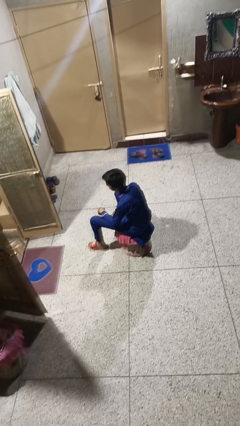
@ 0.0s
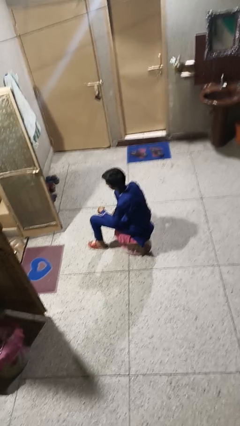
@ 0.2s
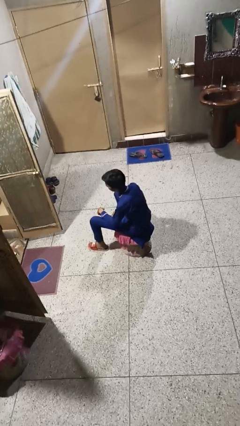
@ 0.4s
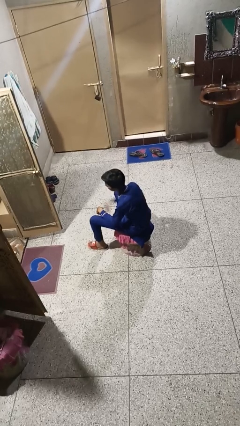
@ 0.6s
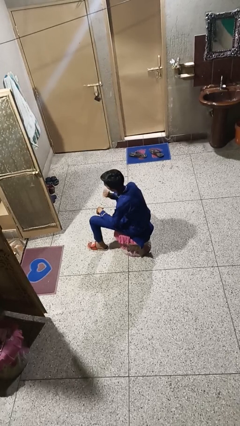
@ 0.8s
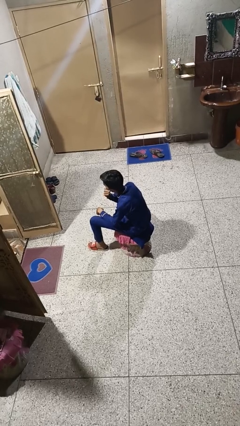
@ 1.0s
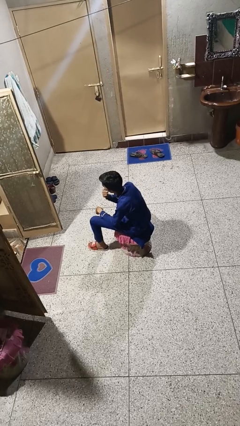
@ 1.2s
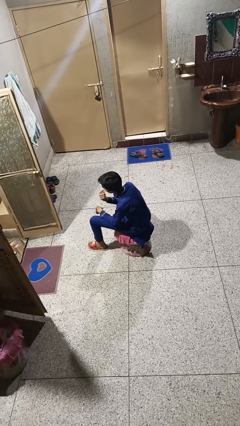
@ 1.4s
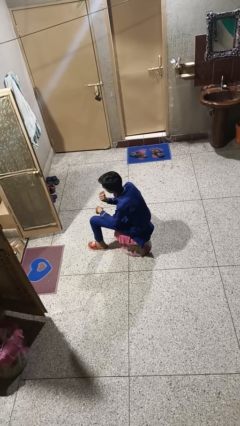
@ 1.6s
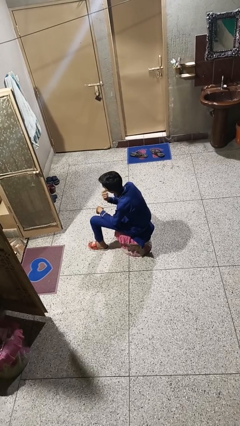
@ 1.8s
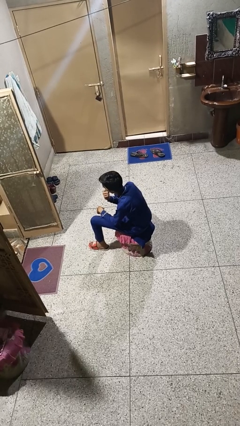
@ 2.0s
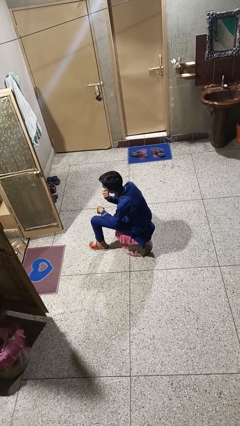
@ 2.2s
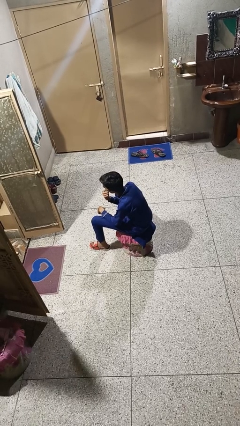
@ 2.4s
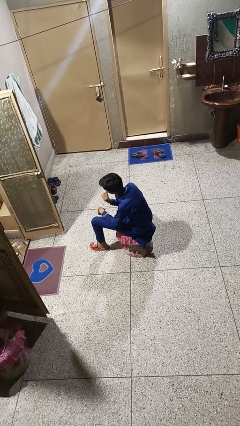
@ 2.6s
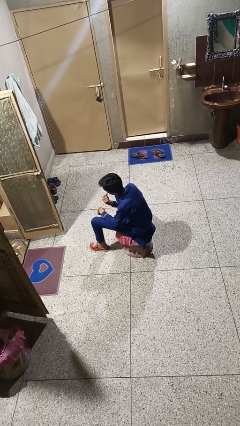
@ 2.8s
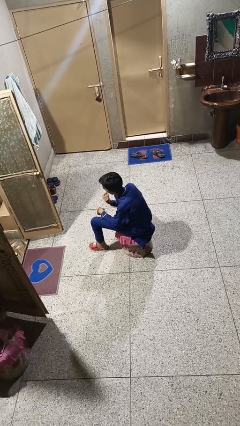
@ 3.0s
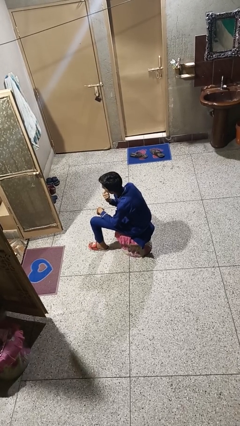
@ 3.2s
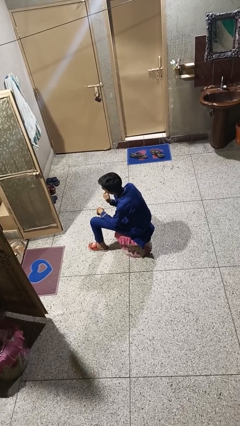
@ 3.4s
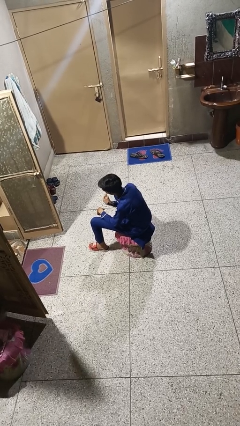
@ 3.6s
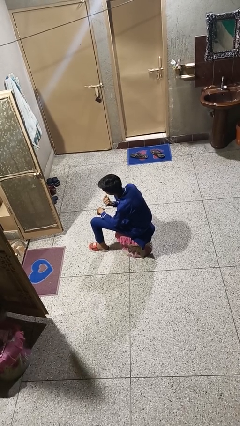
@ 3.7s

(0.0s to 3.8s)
person licks fingers

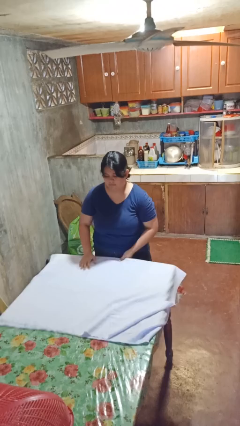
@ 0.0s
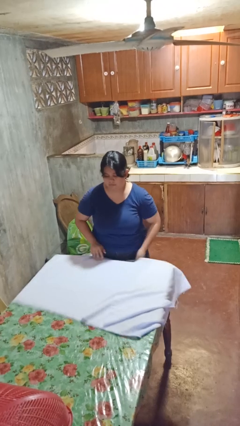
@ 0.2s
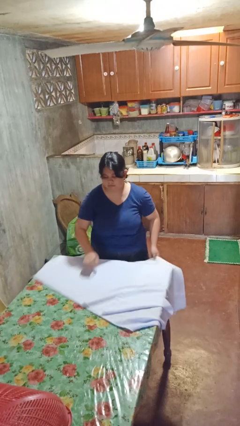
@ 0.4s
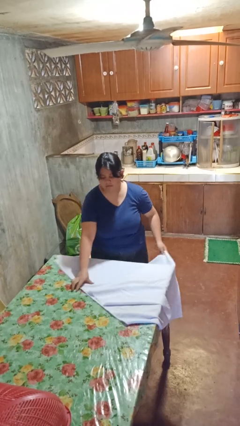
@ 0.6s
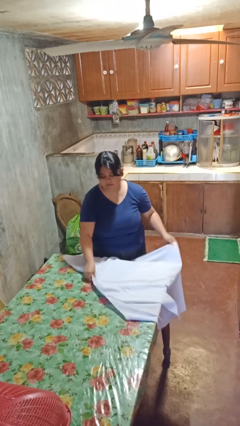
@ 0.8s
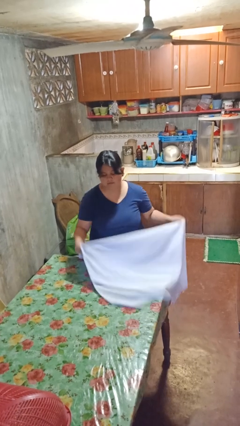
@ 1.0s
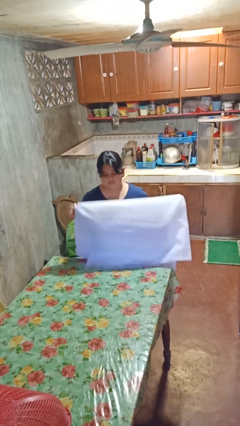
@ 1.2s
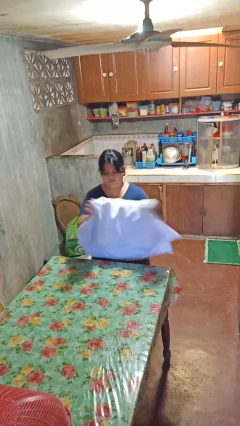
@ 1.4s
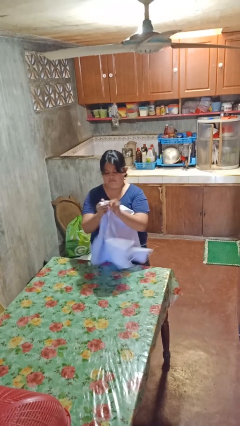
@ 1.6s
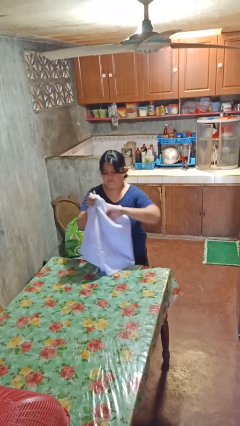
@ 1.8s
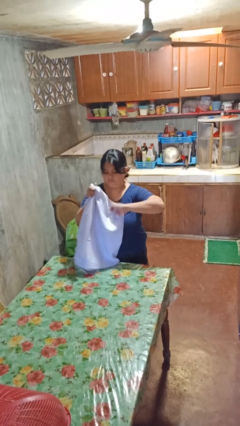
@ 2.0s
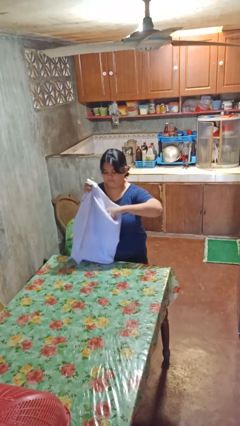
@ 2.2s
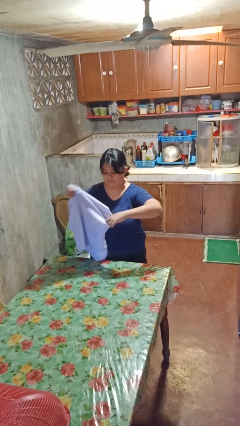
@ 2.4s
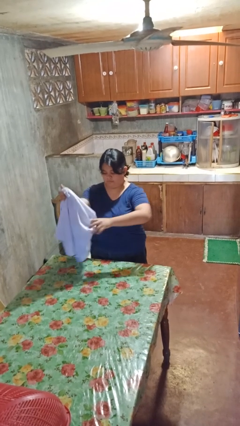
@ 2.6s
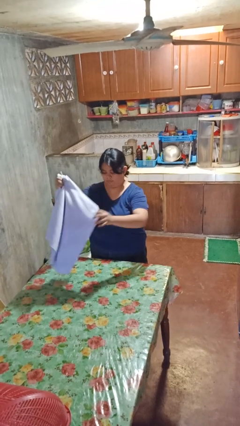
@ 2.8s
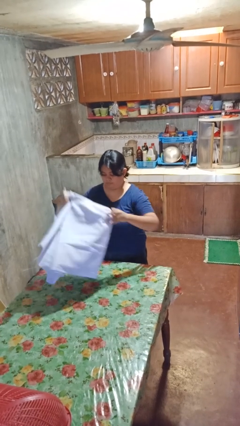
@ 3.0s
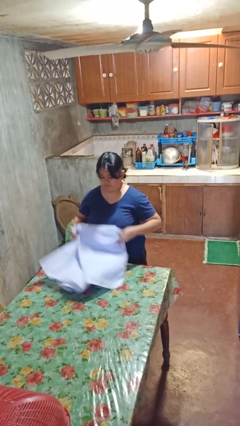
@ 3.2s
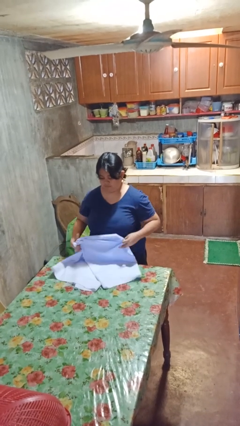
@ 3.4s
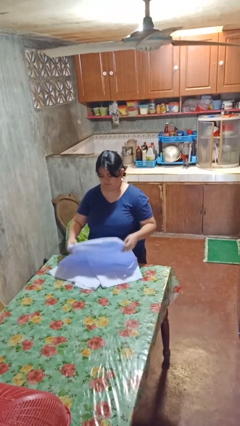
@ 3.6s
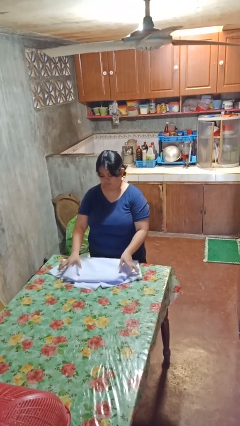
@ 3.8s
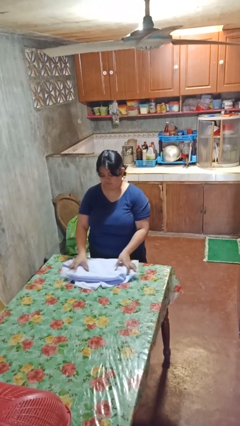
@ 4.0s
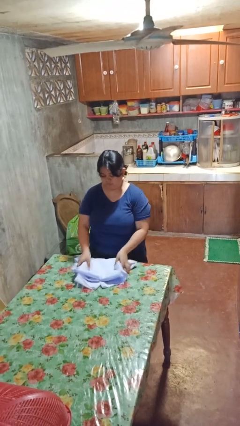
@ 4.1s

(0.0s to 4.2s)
person folds tablecloth

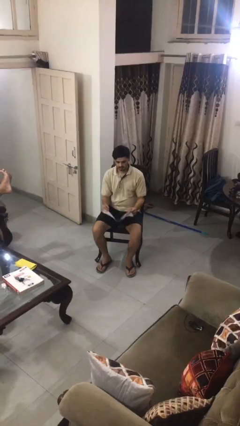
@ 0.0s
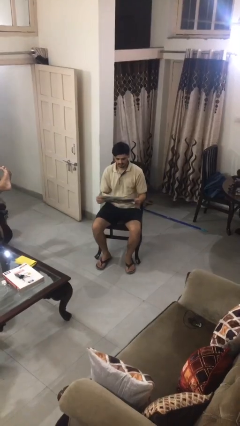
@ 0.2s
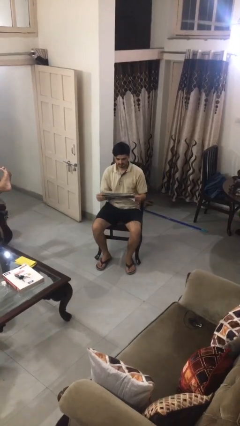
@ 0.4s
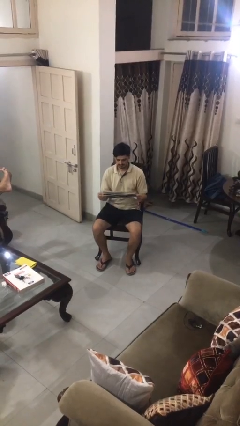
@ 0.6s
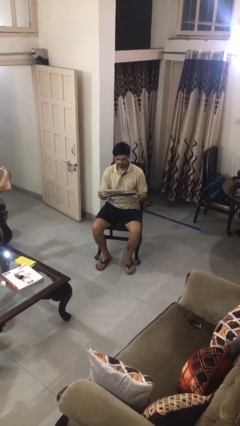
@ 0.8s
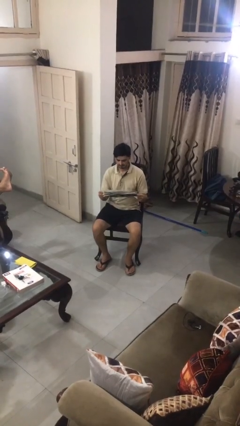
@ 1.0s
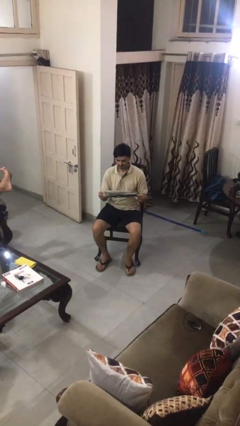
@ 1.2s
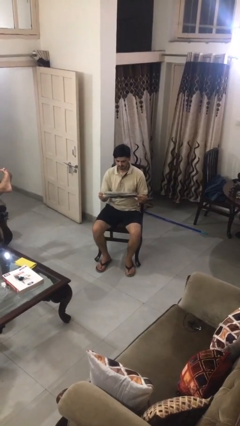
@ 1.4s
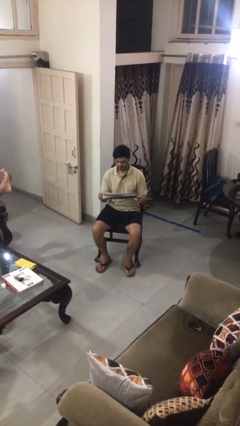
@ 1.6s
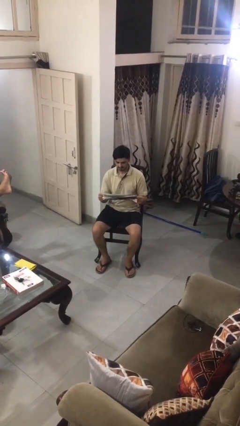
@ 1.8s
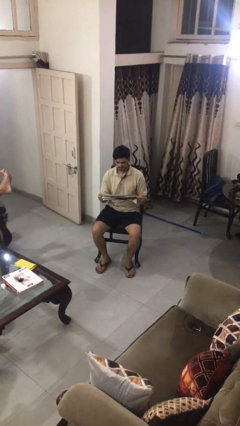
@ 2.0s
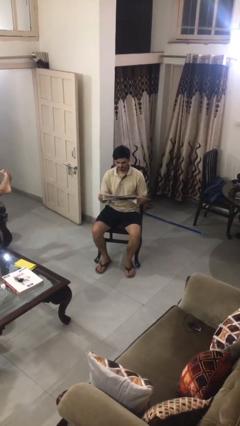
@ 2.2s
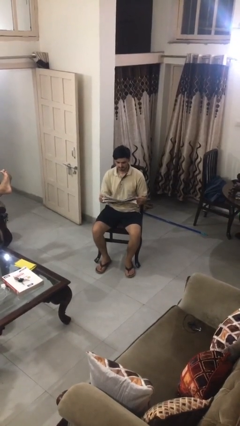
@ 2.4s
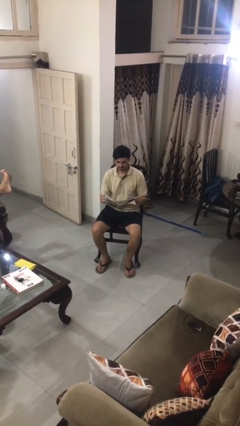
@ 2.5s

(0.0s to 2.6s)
person reads newspaper

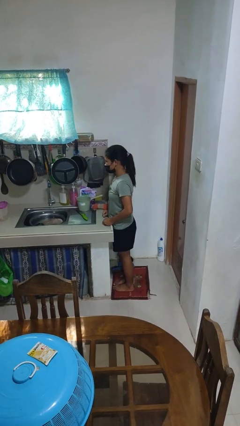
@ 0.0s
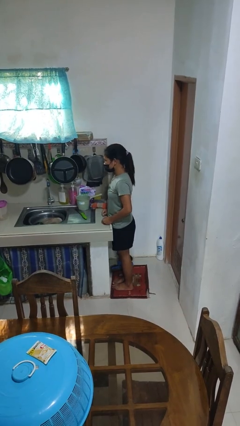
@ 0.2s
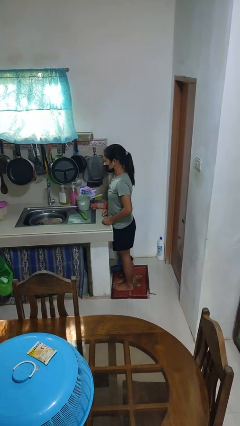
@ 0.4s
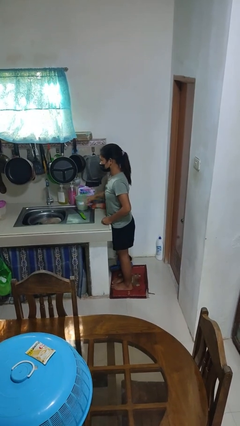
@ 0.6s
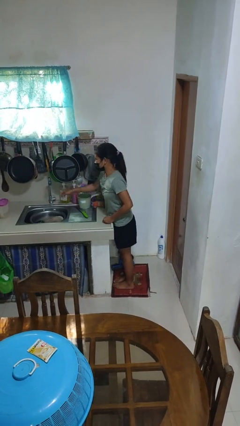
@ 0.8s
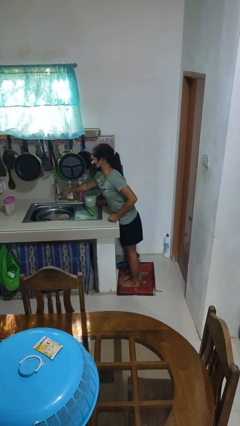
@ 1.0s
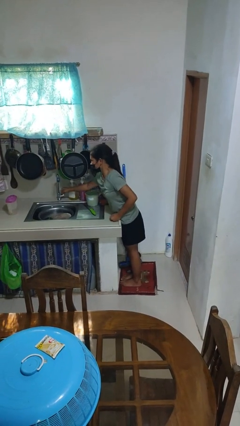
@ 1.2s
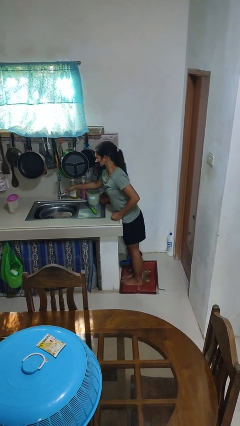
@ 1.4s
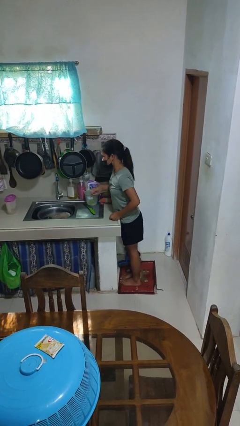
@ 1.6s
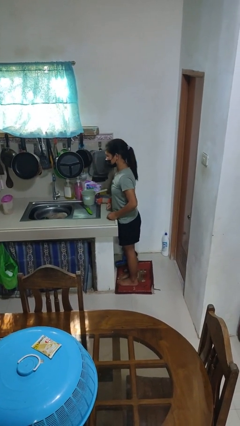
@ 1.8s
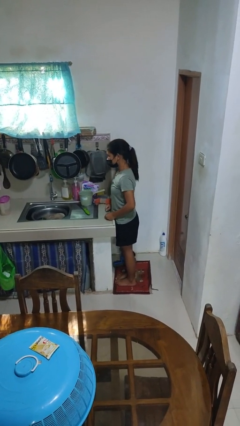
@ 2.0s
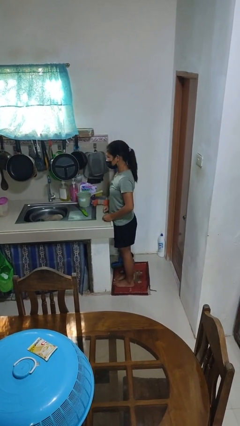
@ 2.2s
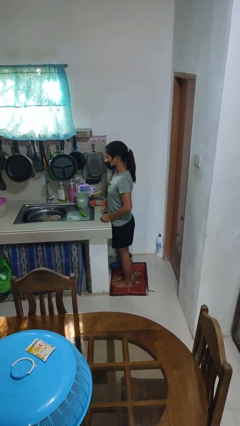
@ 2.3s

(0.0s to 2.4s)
person turns off faucet

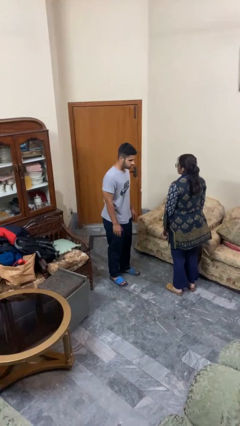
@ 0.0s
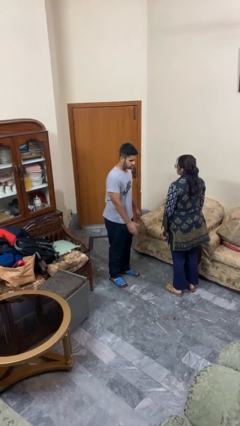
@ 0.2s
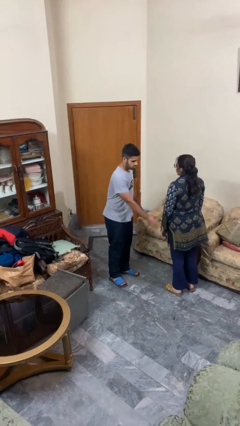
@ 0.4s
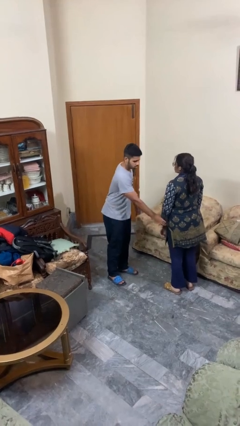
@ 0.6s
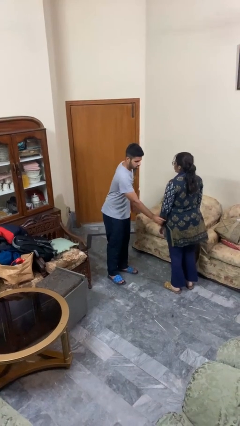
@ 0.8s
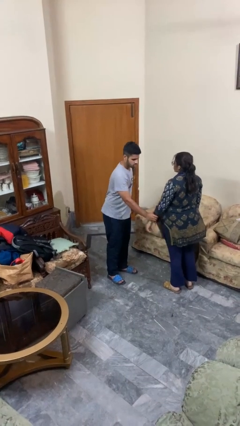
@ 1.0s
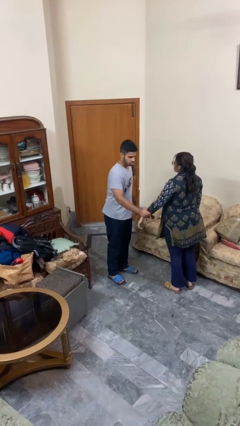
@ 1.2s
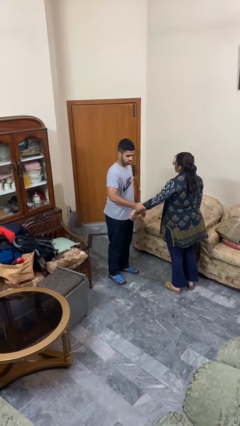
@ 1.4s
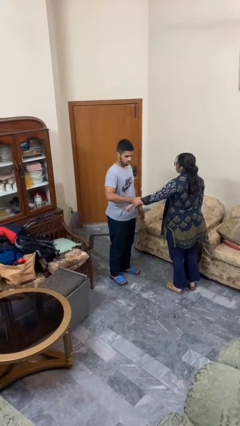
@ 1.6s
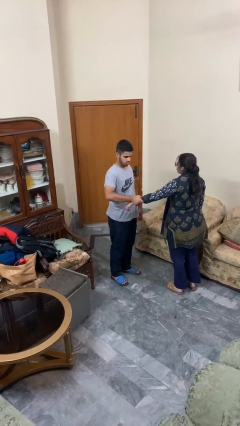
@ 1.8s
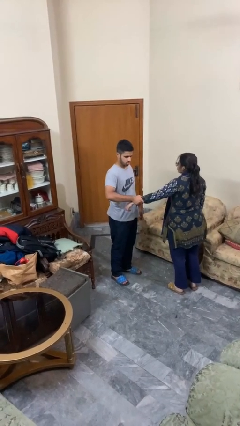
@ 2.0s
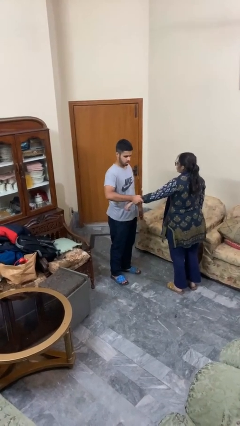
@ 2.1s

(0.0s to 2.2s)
person grabs person by forearm

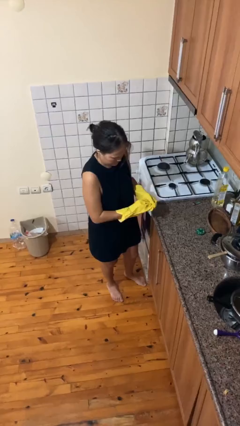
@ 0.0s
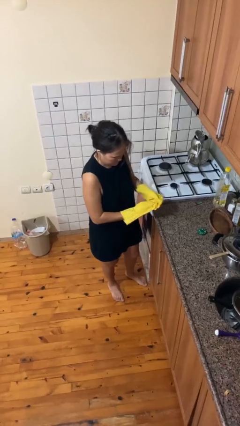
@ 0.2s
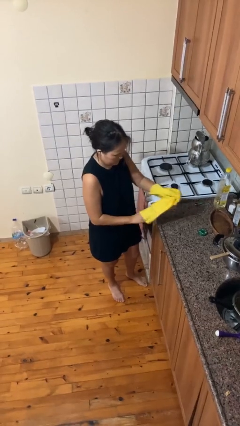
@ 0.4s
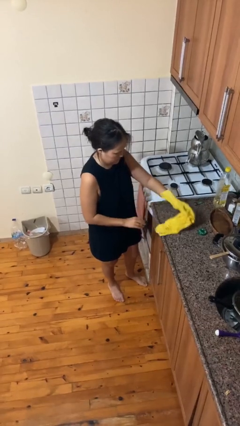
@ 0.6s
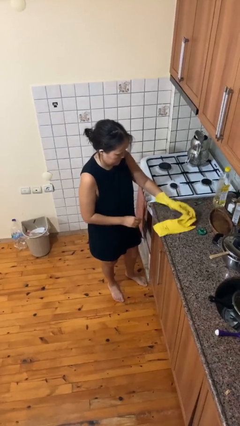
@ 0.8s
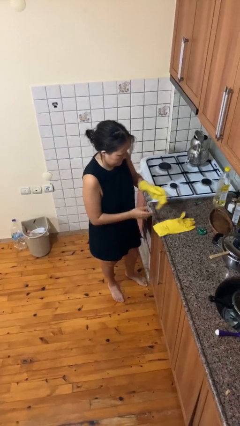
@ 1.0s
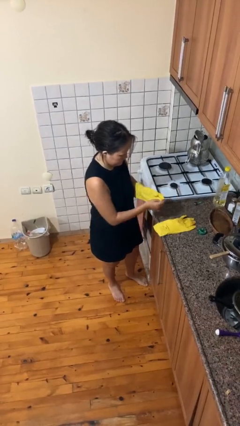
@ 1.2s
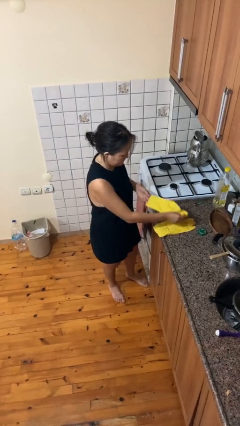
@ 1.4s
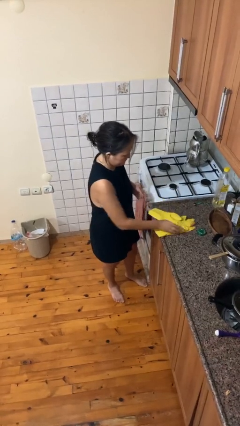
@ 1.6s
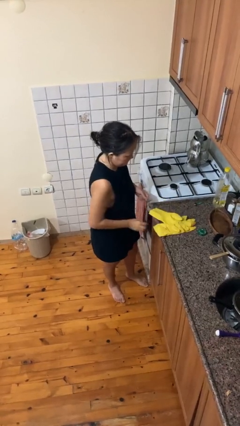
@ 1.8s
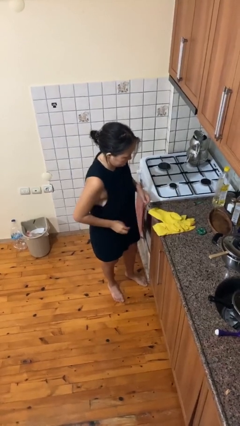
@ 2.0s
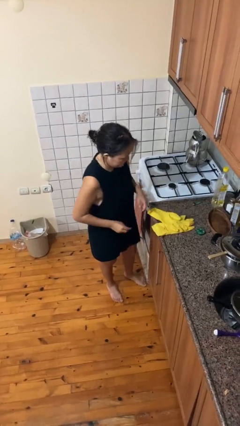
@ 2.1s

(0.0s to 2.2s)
person takes off gloves

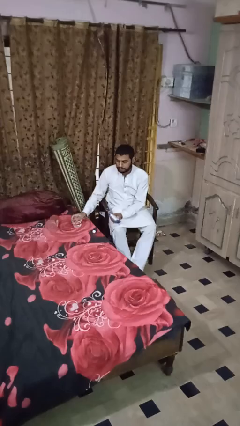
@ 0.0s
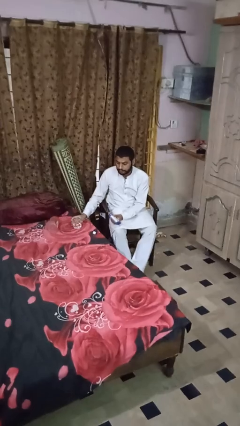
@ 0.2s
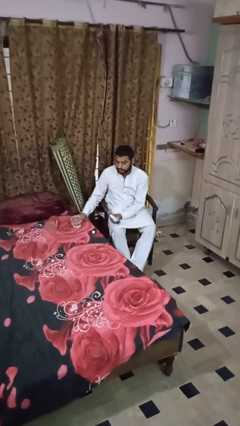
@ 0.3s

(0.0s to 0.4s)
person drinks from cup
